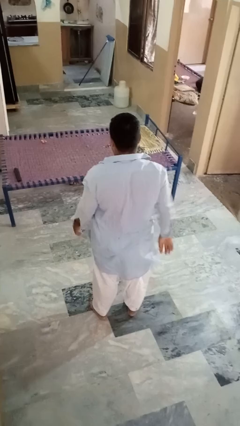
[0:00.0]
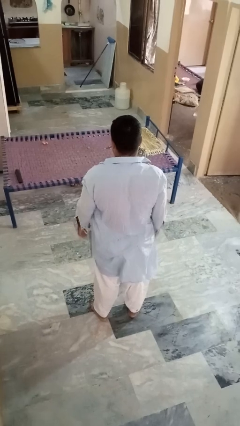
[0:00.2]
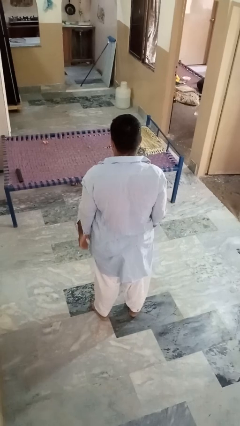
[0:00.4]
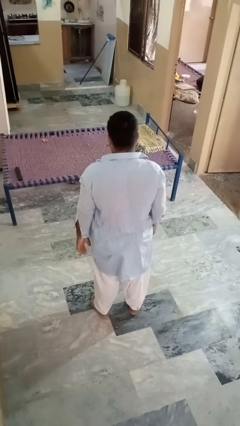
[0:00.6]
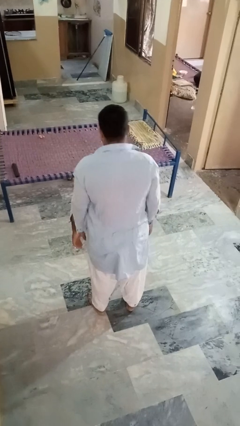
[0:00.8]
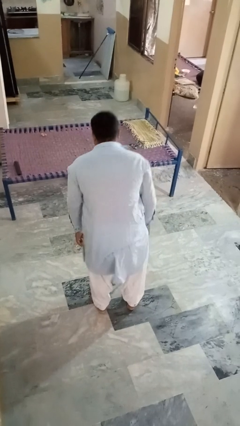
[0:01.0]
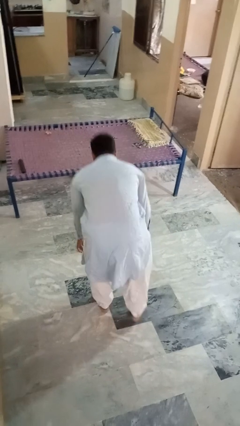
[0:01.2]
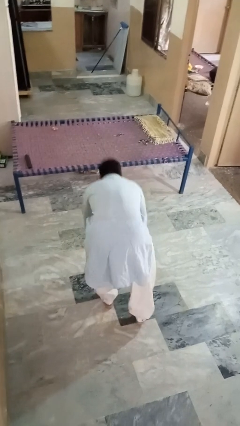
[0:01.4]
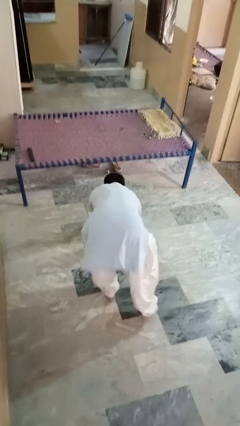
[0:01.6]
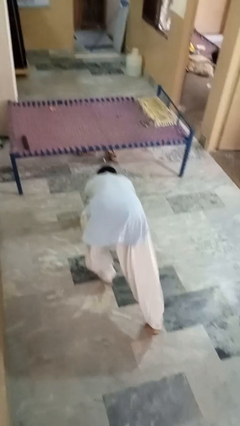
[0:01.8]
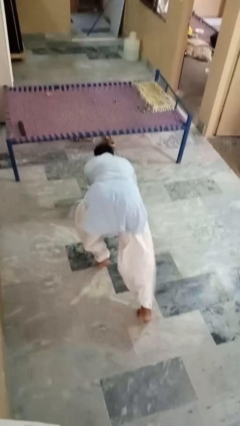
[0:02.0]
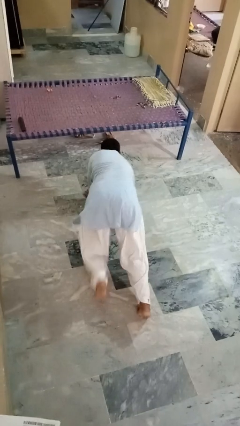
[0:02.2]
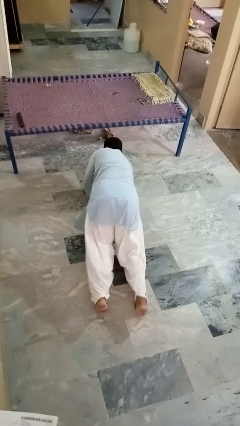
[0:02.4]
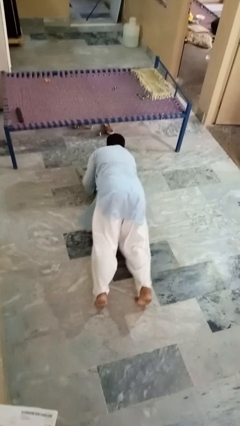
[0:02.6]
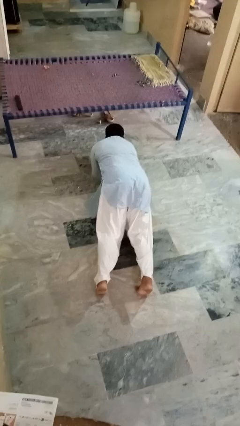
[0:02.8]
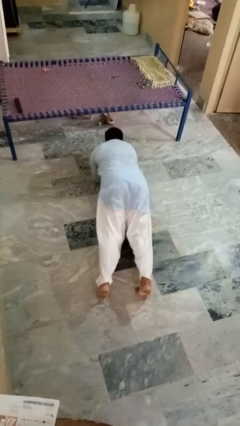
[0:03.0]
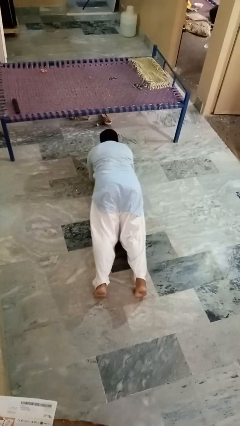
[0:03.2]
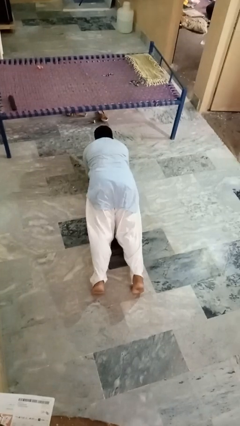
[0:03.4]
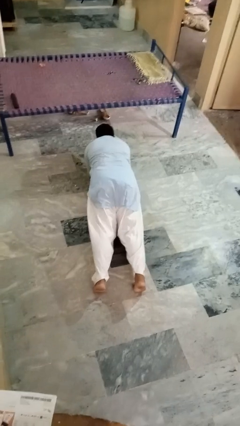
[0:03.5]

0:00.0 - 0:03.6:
person exercises with plank

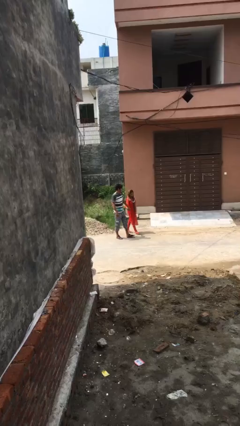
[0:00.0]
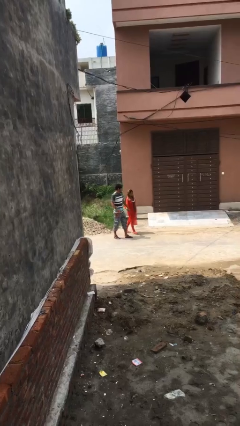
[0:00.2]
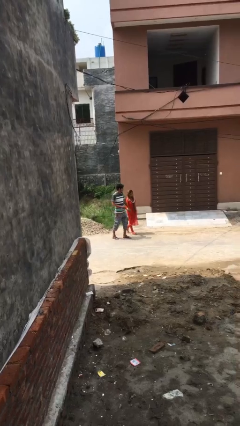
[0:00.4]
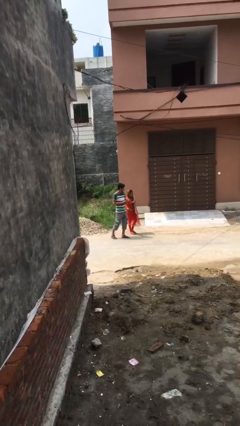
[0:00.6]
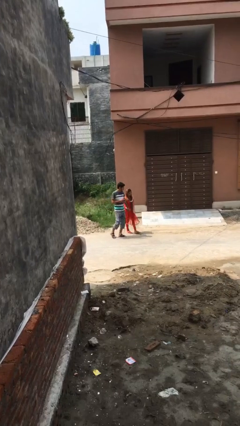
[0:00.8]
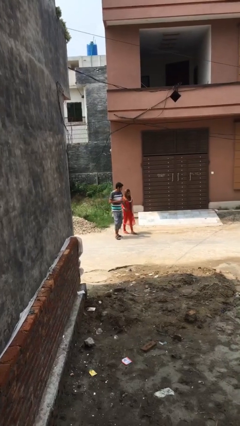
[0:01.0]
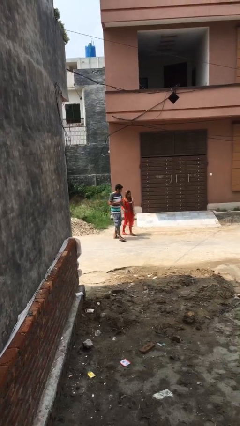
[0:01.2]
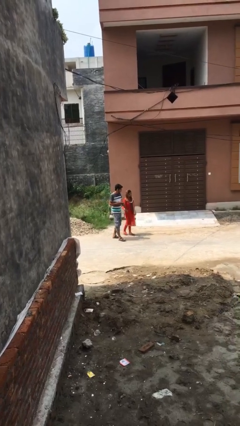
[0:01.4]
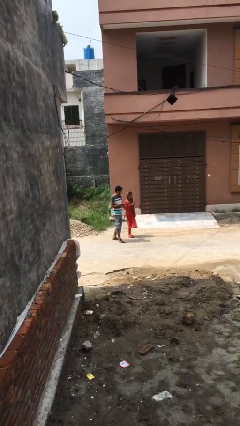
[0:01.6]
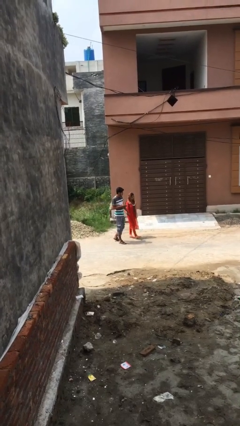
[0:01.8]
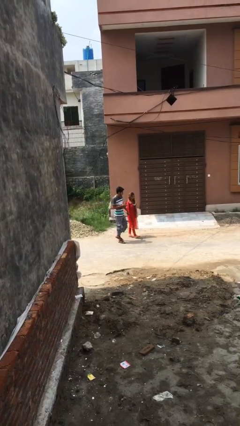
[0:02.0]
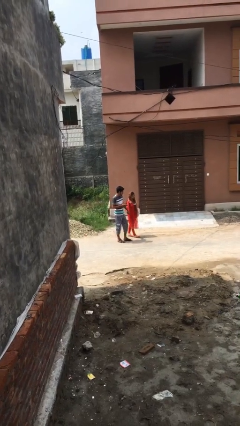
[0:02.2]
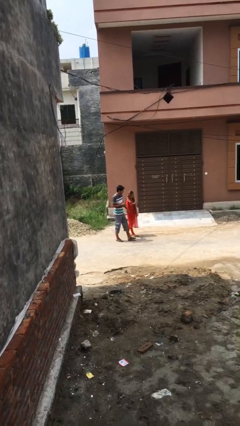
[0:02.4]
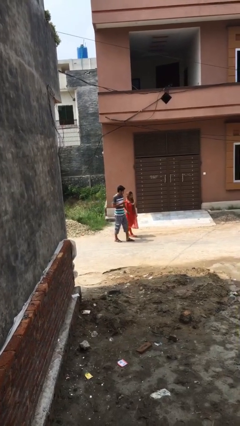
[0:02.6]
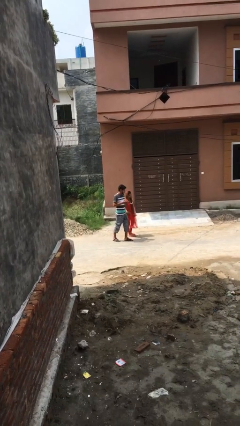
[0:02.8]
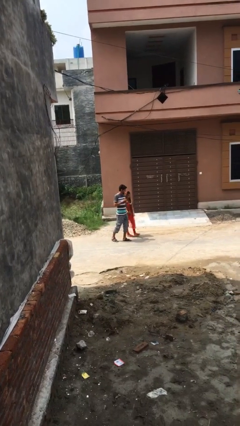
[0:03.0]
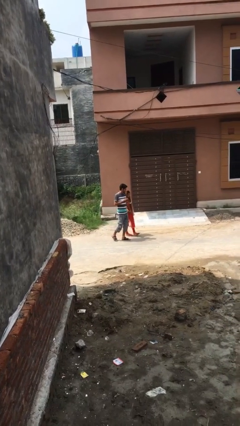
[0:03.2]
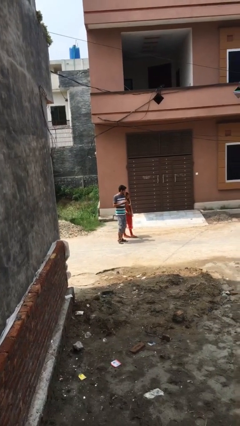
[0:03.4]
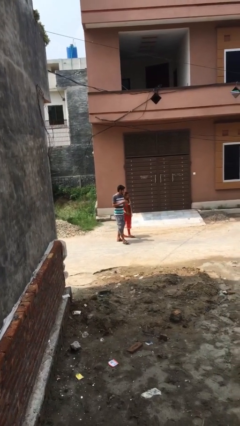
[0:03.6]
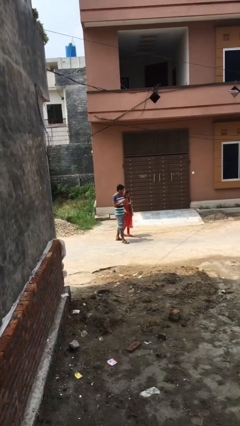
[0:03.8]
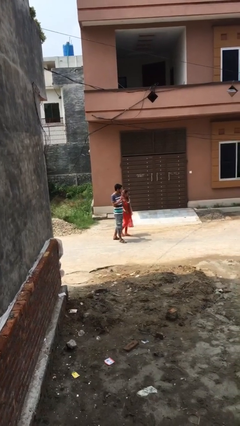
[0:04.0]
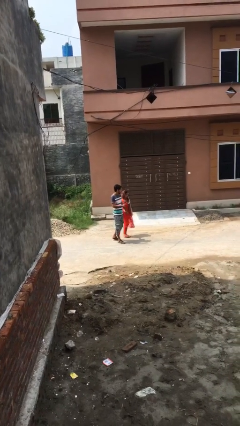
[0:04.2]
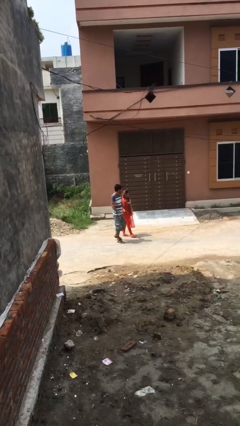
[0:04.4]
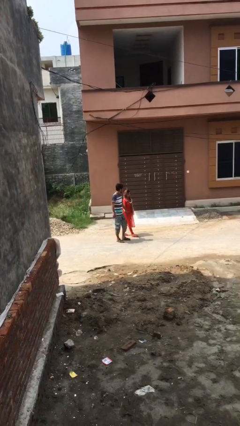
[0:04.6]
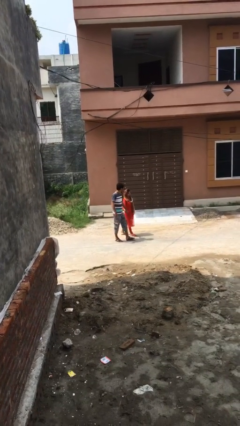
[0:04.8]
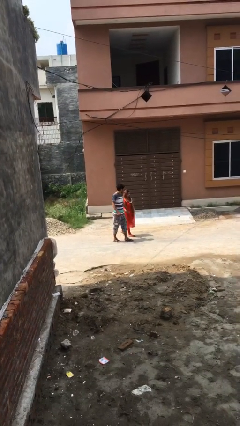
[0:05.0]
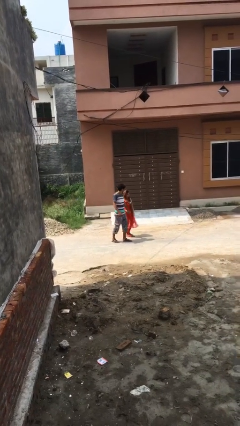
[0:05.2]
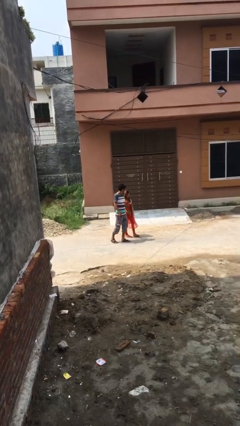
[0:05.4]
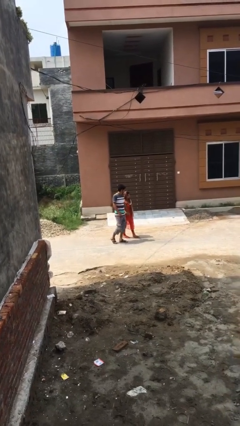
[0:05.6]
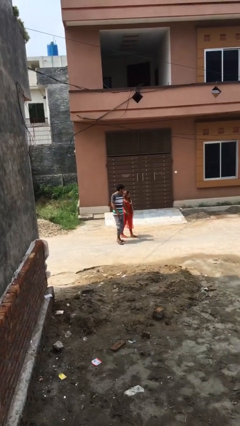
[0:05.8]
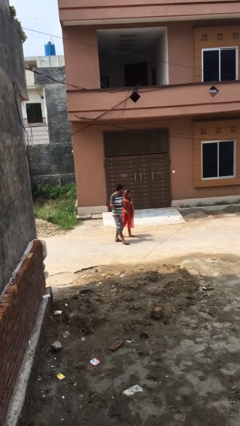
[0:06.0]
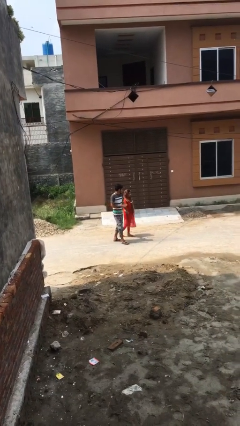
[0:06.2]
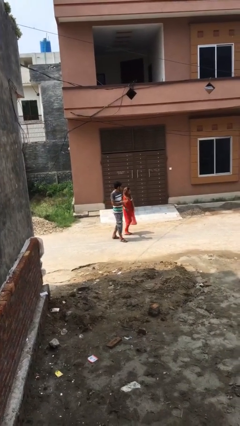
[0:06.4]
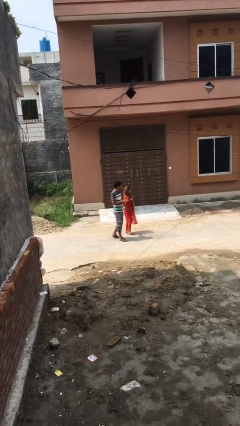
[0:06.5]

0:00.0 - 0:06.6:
person holds hand

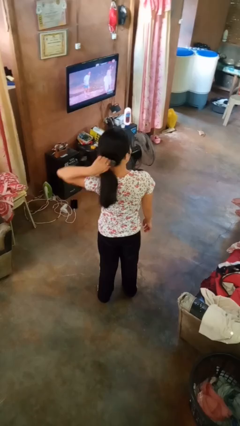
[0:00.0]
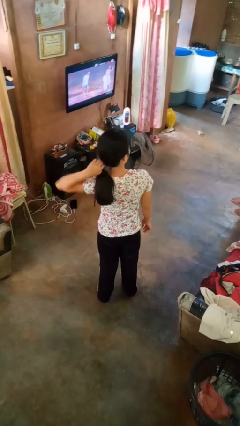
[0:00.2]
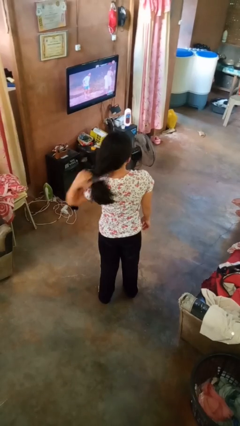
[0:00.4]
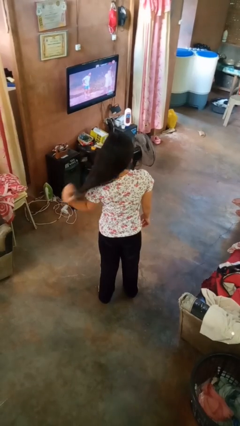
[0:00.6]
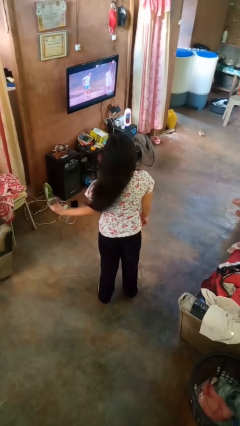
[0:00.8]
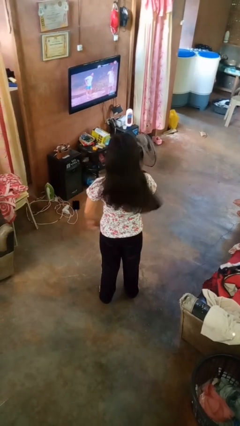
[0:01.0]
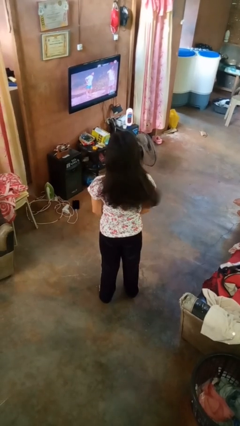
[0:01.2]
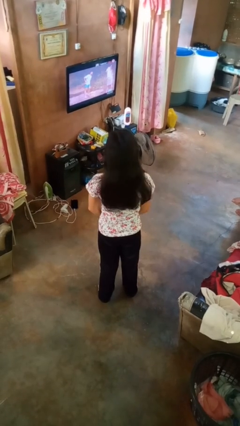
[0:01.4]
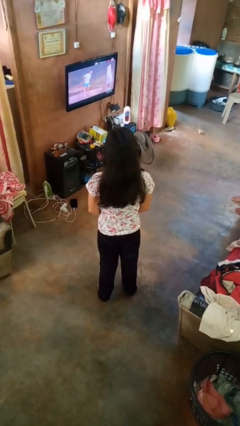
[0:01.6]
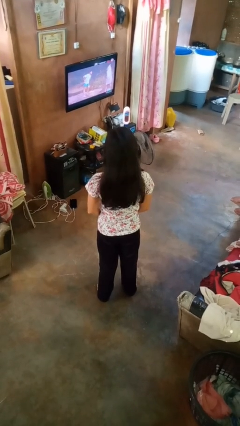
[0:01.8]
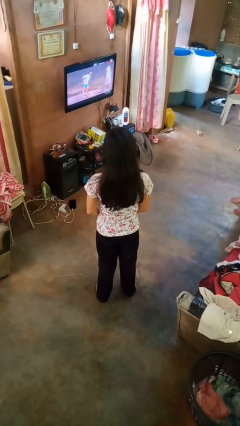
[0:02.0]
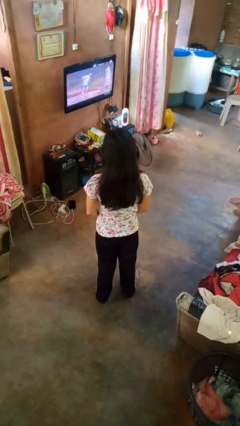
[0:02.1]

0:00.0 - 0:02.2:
person takes off hairtie

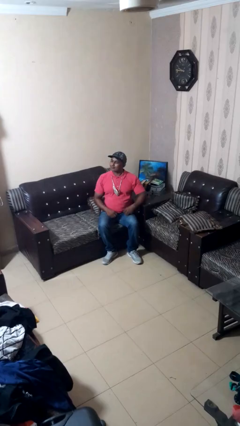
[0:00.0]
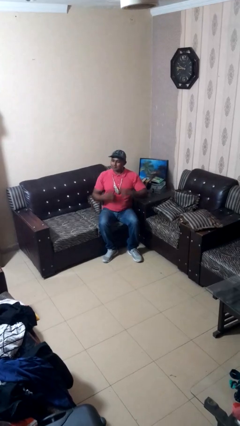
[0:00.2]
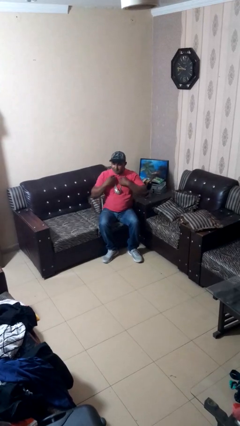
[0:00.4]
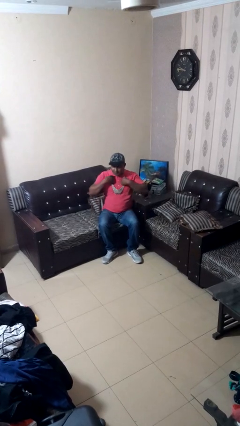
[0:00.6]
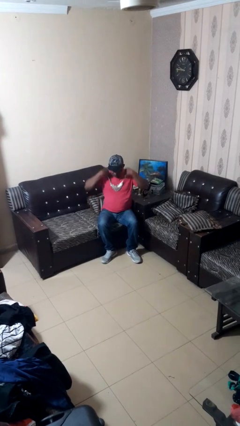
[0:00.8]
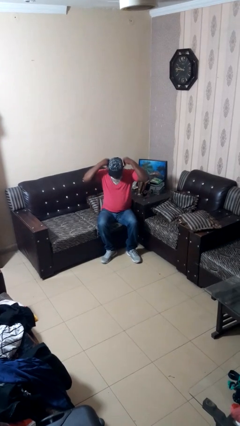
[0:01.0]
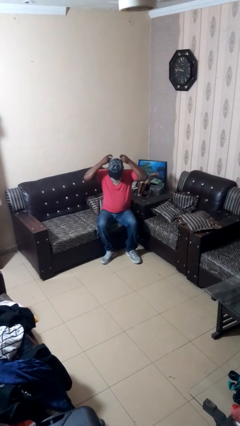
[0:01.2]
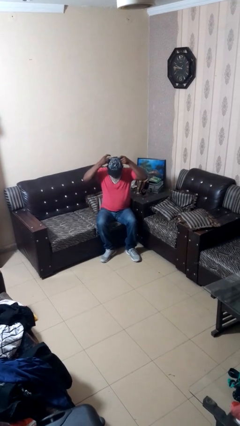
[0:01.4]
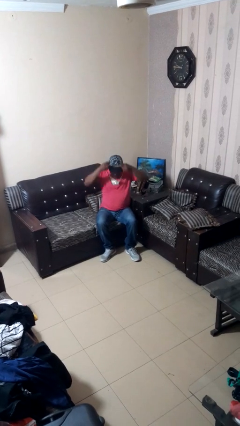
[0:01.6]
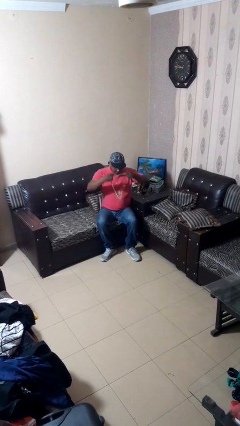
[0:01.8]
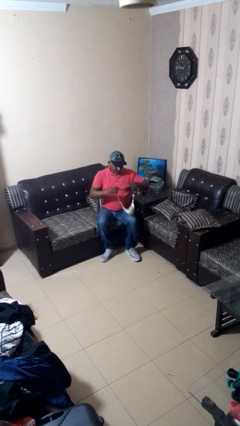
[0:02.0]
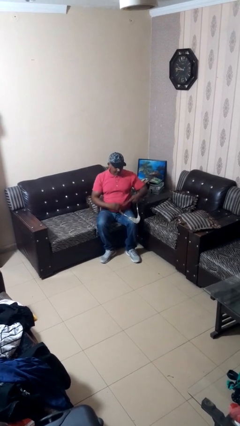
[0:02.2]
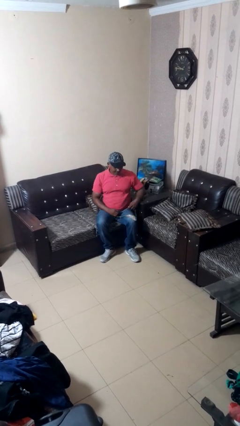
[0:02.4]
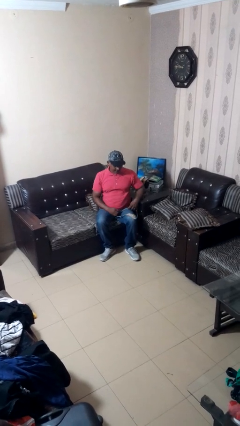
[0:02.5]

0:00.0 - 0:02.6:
person takes off necklace

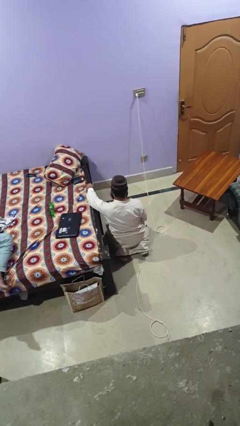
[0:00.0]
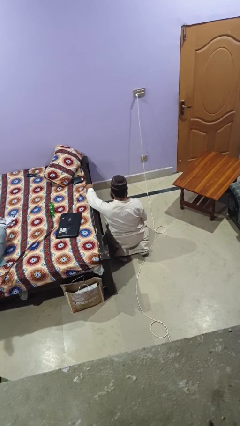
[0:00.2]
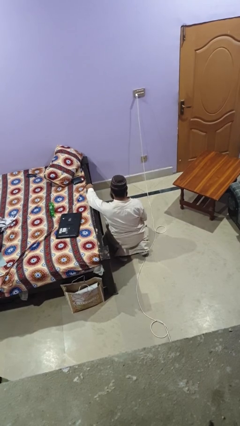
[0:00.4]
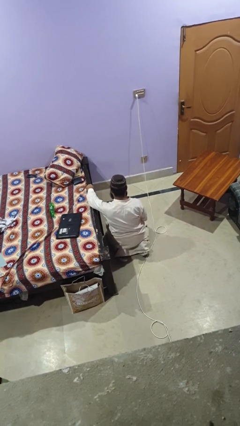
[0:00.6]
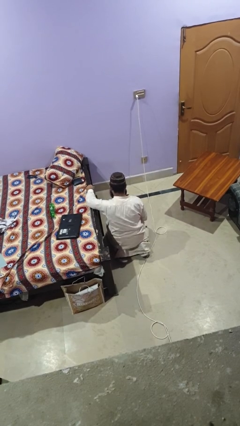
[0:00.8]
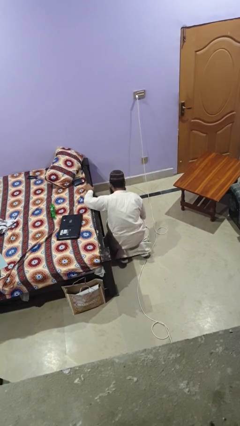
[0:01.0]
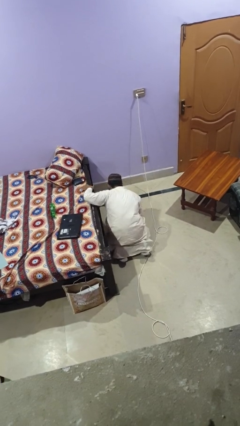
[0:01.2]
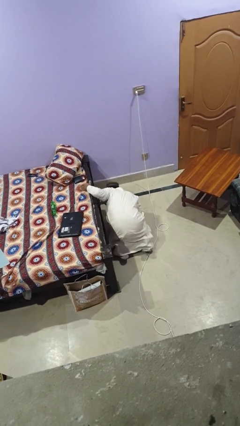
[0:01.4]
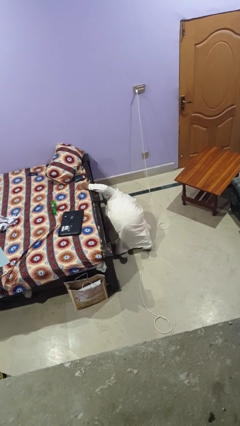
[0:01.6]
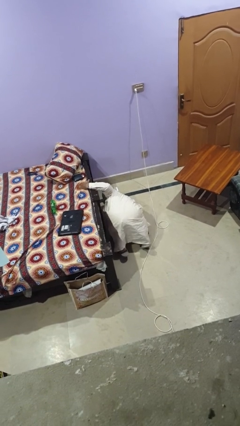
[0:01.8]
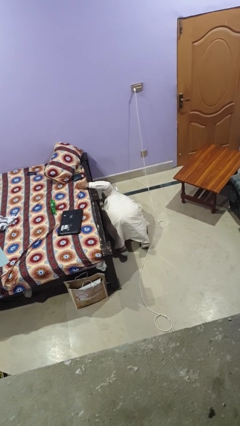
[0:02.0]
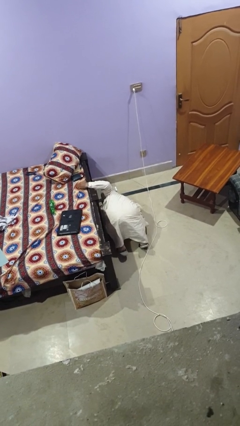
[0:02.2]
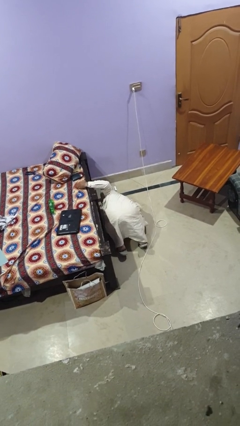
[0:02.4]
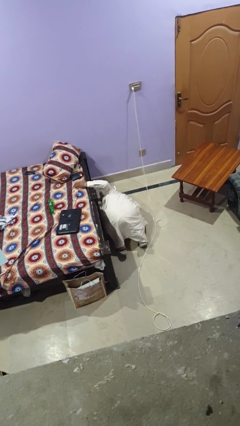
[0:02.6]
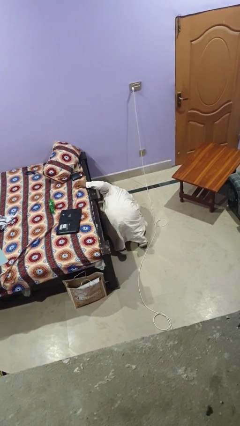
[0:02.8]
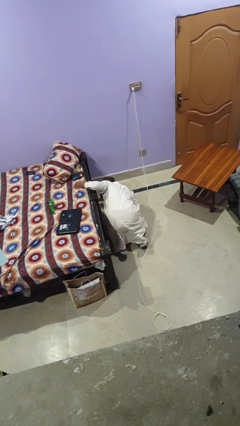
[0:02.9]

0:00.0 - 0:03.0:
person searches under bed
